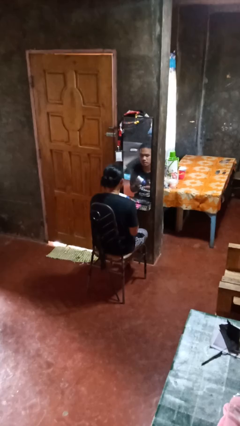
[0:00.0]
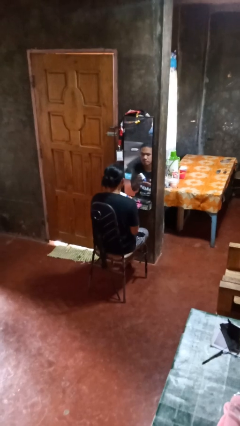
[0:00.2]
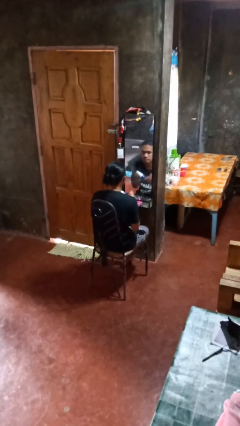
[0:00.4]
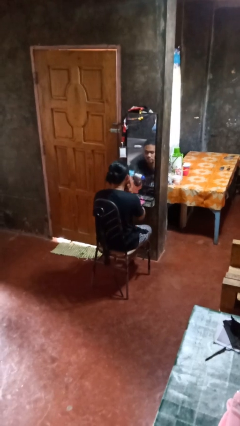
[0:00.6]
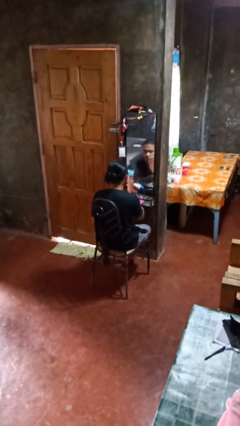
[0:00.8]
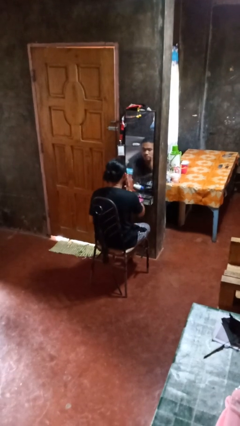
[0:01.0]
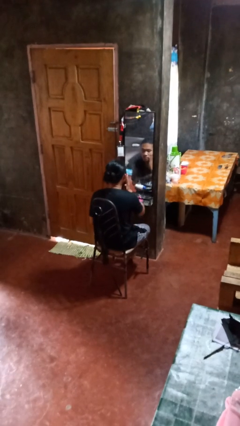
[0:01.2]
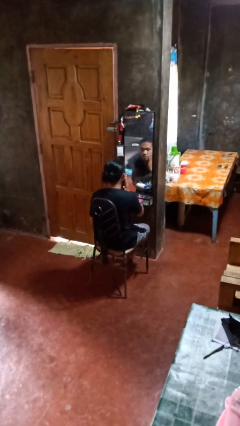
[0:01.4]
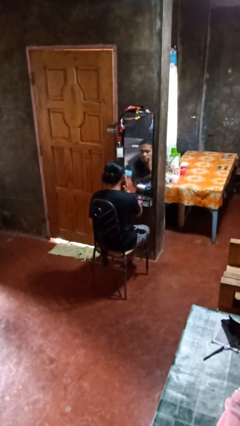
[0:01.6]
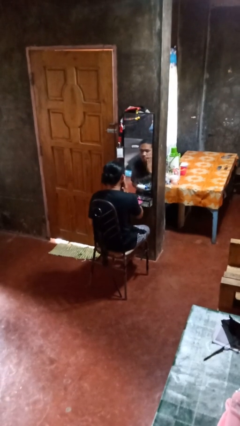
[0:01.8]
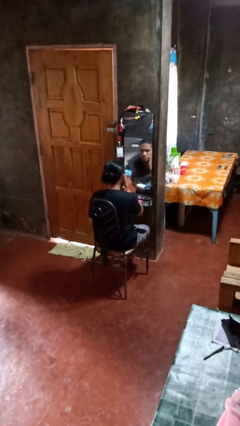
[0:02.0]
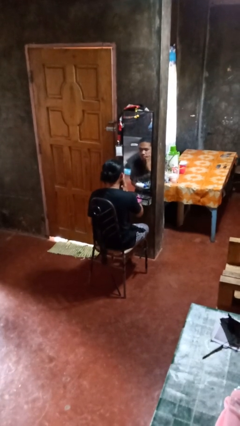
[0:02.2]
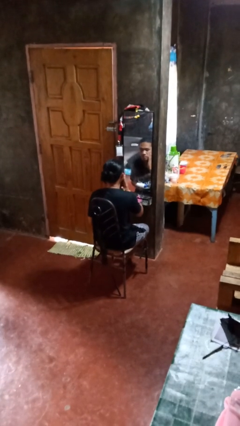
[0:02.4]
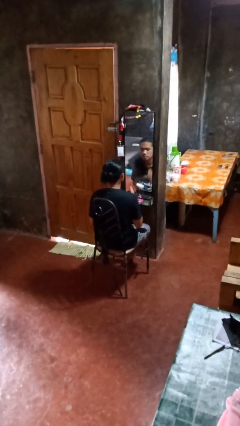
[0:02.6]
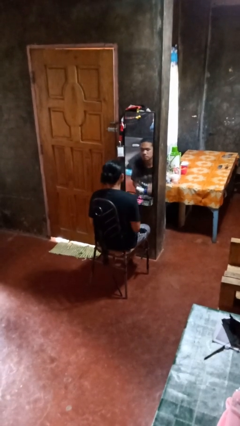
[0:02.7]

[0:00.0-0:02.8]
person applies foundation makeup

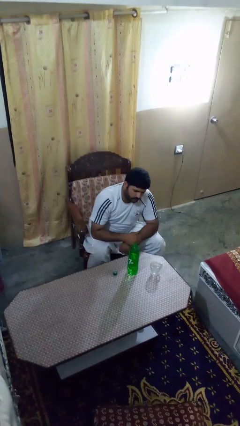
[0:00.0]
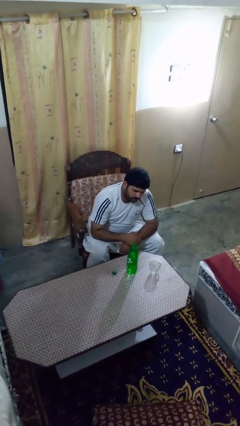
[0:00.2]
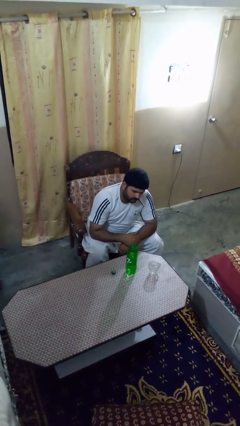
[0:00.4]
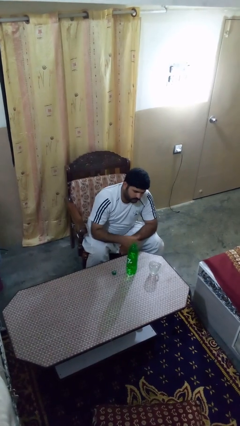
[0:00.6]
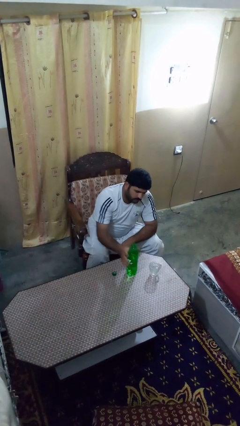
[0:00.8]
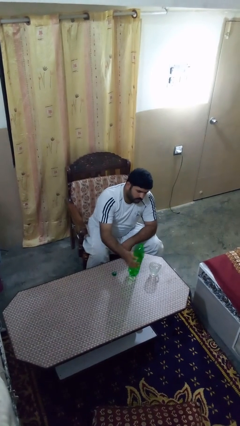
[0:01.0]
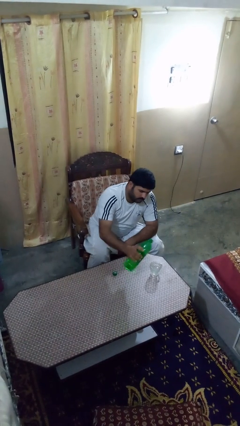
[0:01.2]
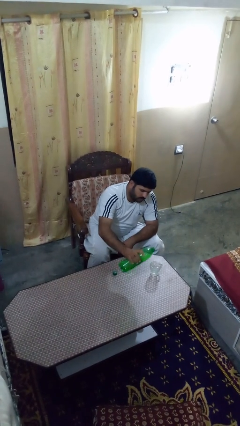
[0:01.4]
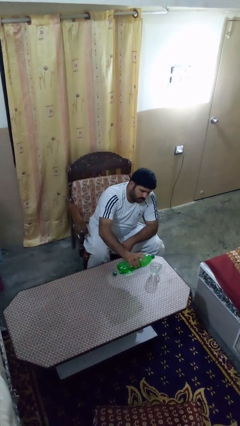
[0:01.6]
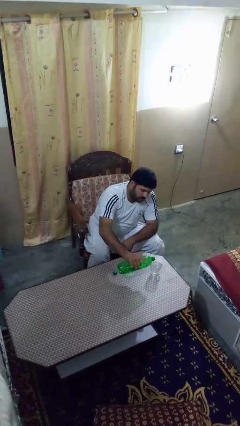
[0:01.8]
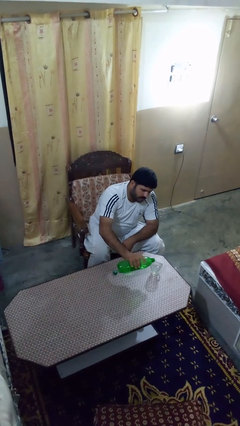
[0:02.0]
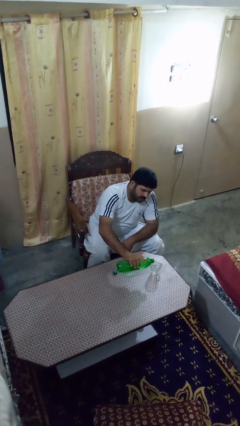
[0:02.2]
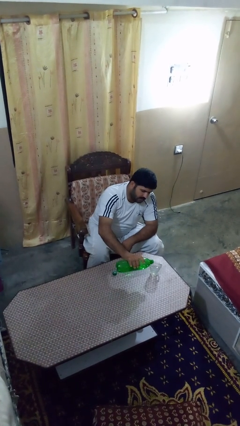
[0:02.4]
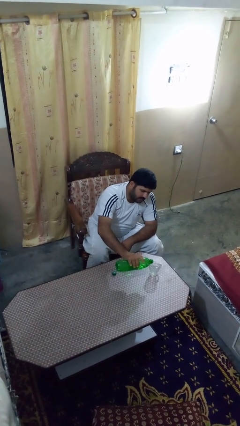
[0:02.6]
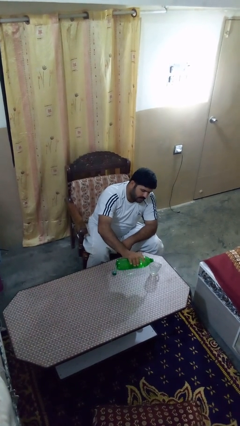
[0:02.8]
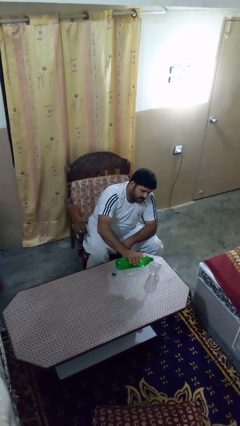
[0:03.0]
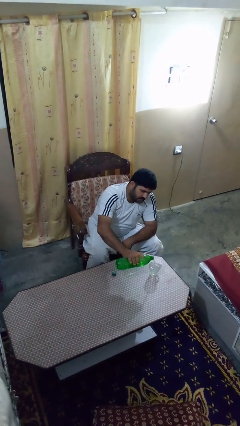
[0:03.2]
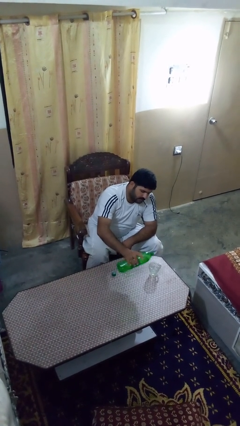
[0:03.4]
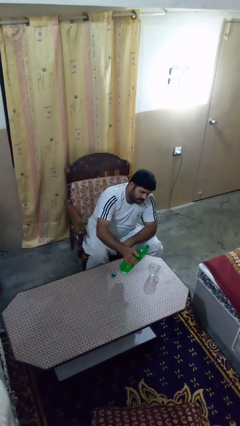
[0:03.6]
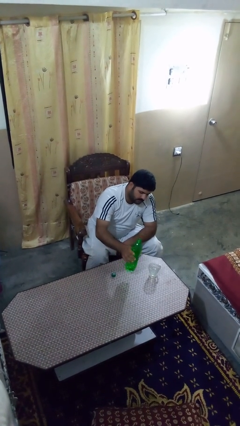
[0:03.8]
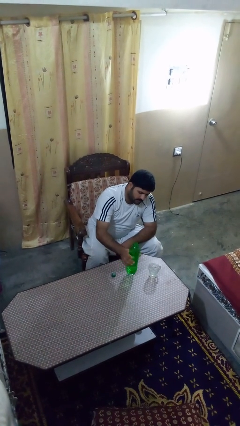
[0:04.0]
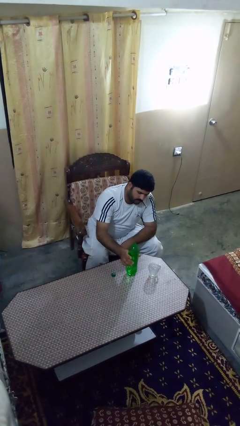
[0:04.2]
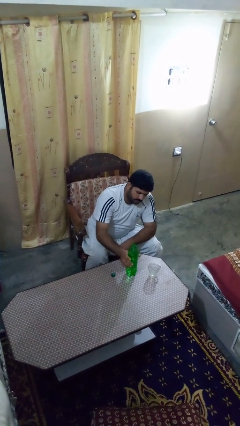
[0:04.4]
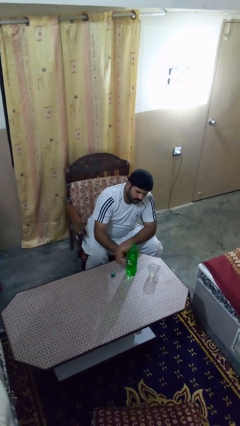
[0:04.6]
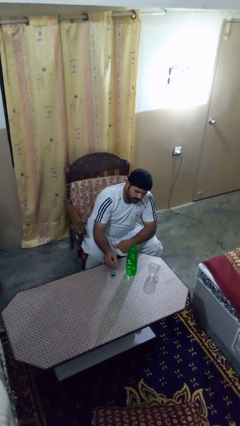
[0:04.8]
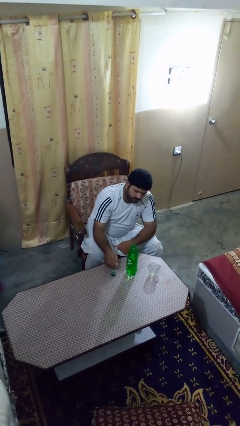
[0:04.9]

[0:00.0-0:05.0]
person pours liquid into cup

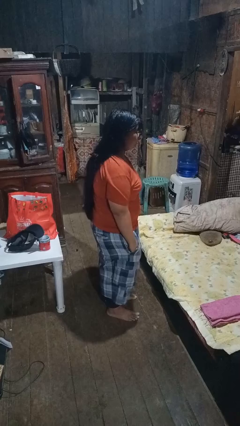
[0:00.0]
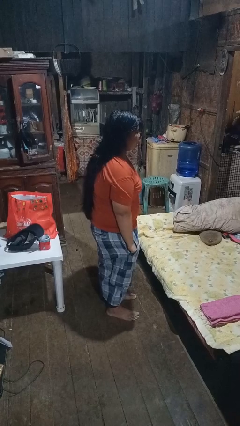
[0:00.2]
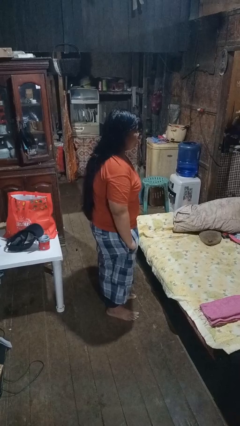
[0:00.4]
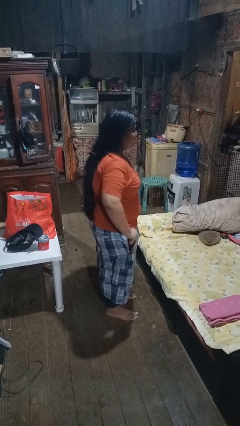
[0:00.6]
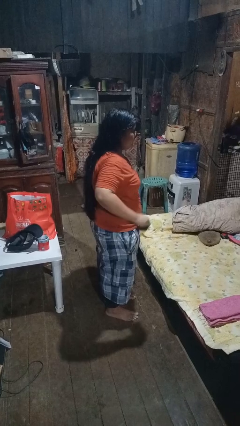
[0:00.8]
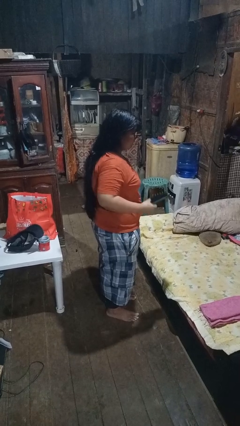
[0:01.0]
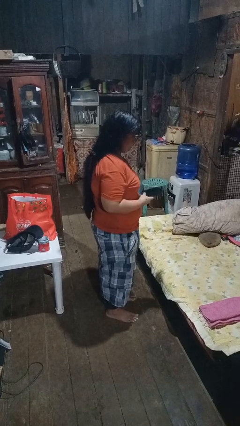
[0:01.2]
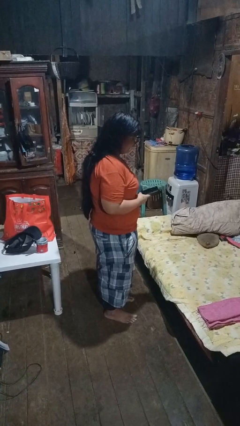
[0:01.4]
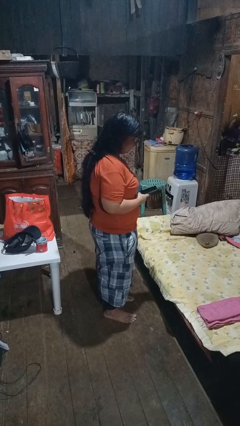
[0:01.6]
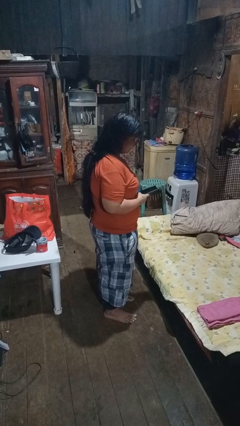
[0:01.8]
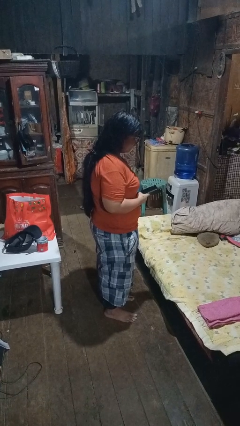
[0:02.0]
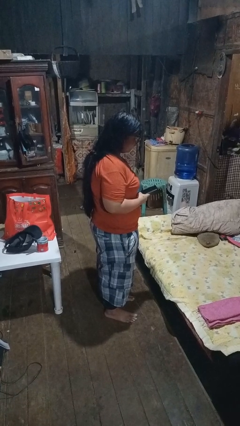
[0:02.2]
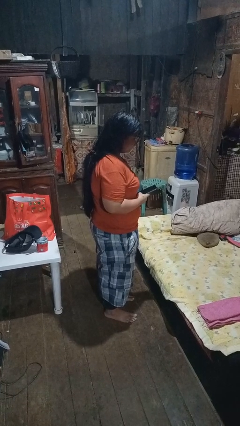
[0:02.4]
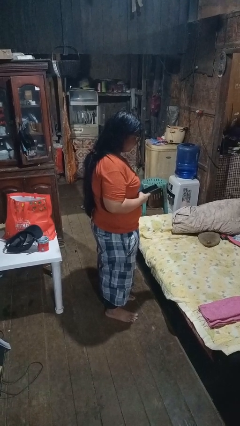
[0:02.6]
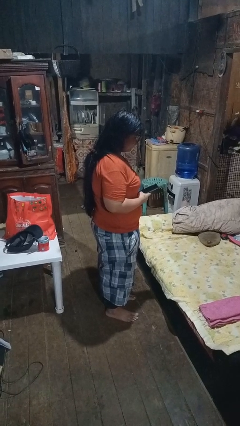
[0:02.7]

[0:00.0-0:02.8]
person takes phone from pocket

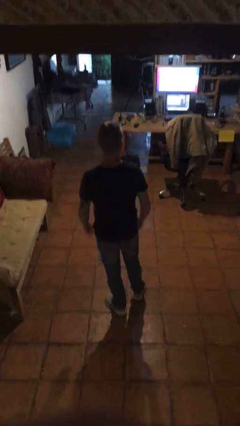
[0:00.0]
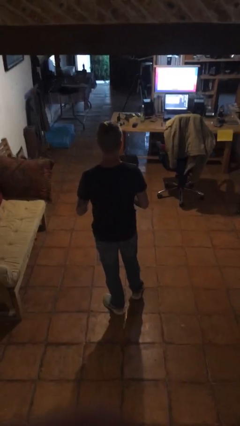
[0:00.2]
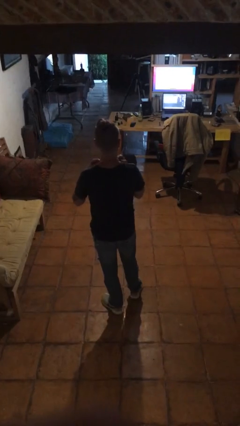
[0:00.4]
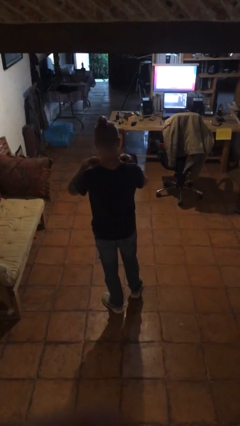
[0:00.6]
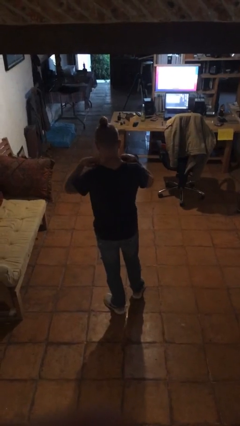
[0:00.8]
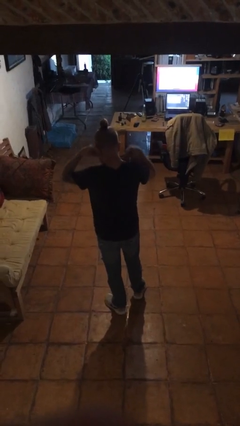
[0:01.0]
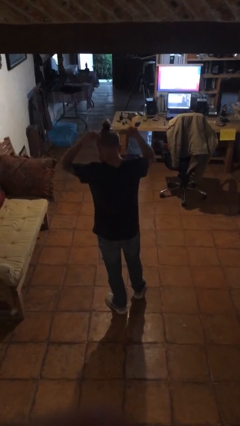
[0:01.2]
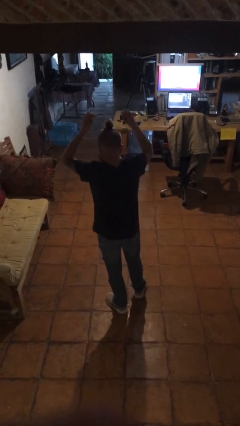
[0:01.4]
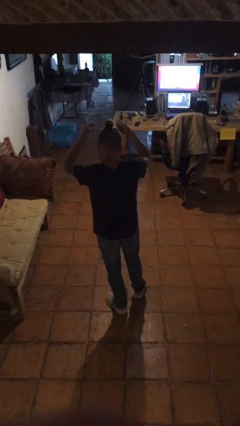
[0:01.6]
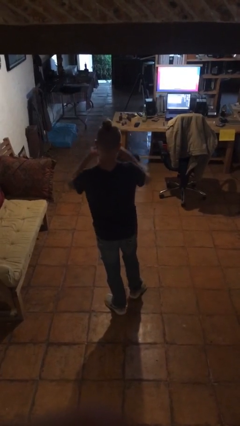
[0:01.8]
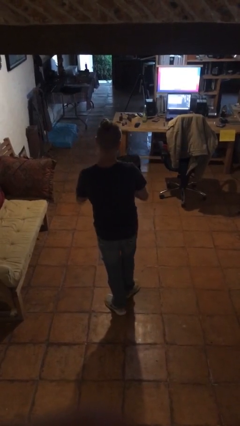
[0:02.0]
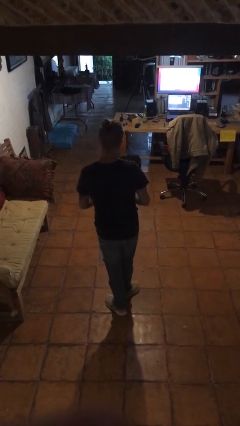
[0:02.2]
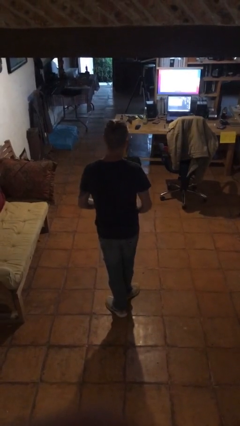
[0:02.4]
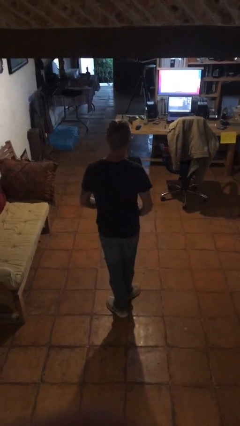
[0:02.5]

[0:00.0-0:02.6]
person takes off necklace

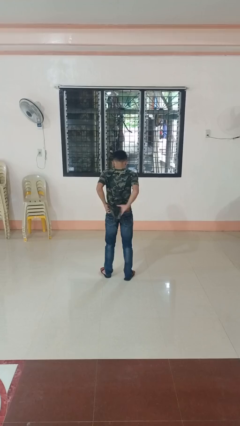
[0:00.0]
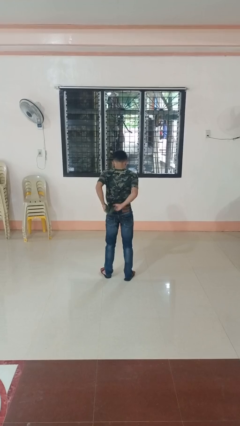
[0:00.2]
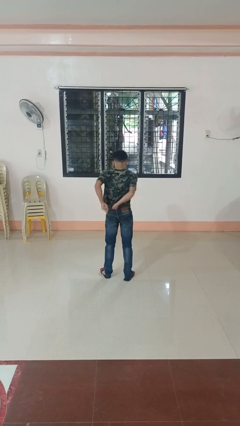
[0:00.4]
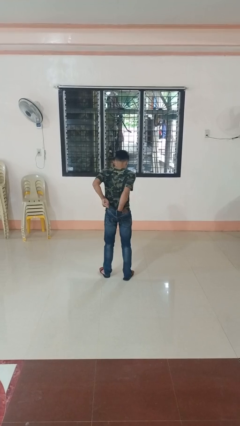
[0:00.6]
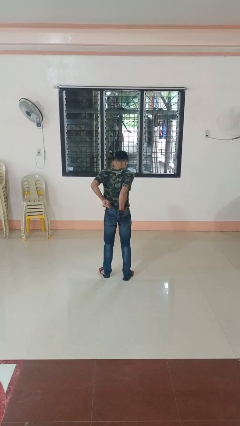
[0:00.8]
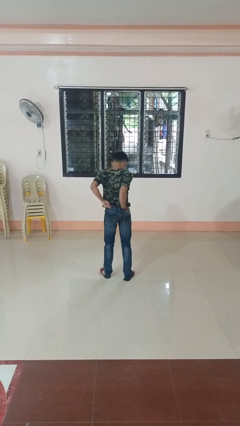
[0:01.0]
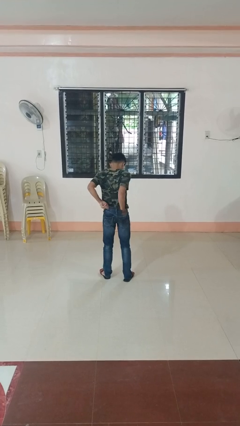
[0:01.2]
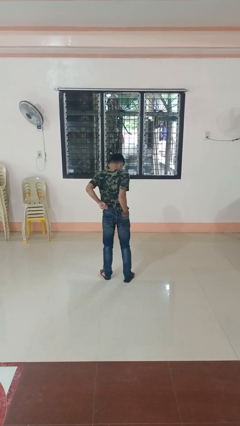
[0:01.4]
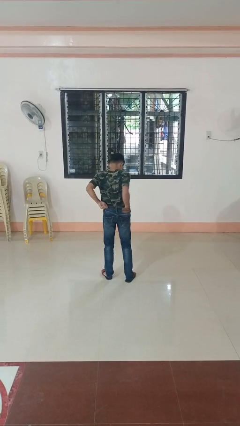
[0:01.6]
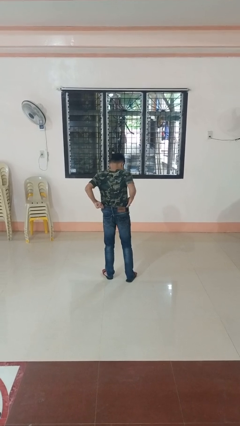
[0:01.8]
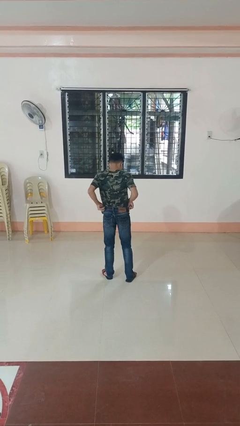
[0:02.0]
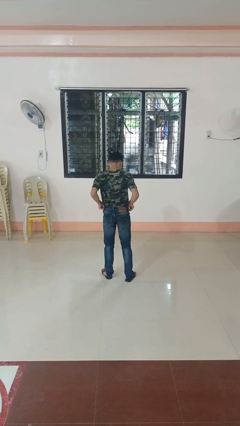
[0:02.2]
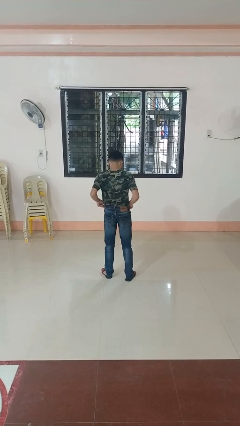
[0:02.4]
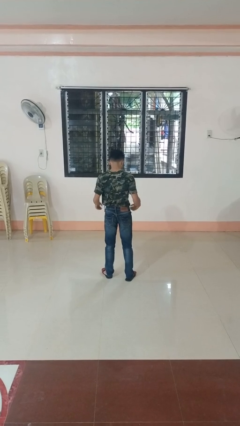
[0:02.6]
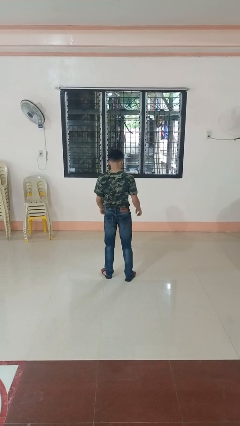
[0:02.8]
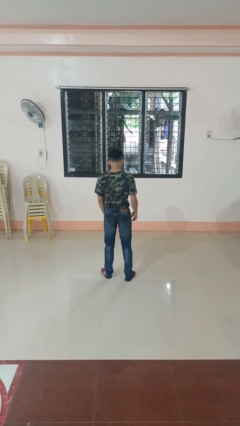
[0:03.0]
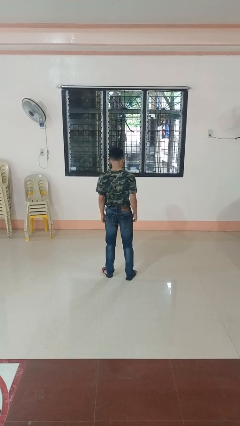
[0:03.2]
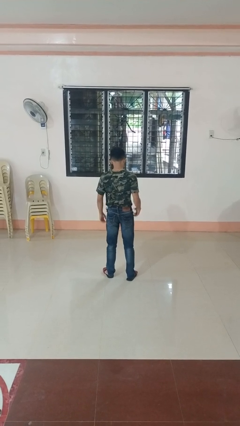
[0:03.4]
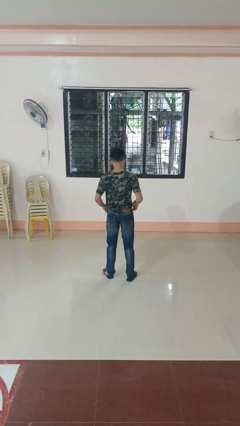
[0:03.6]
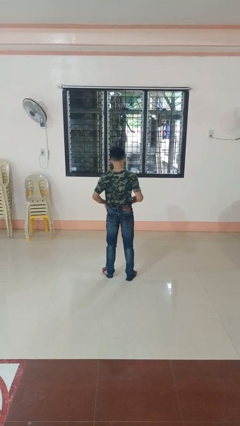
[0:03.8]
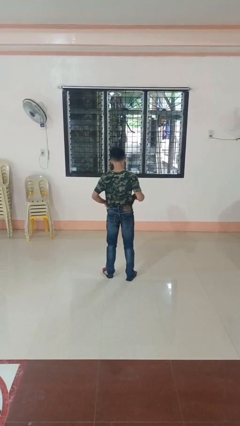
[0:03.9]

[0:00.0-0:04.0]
person tucks in shirt

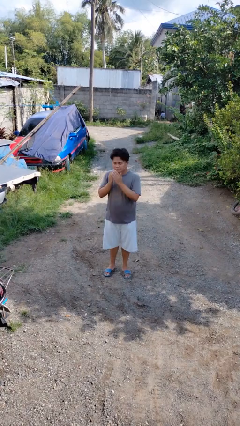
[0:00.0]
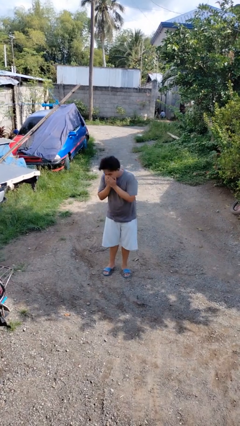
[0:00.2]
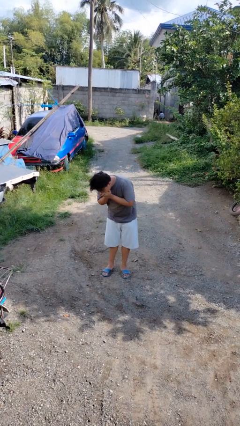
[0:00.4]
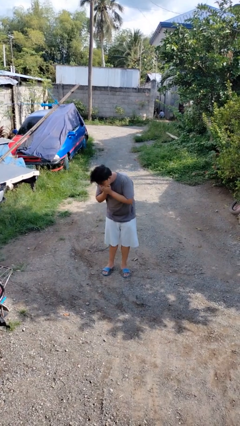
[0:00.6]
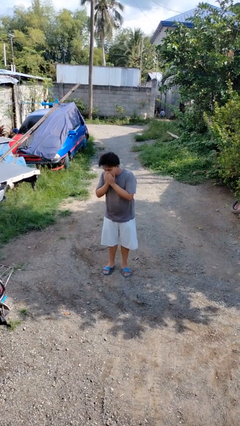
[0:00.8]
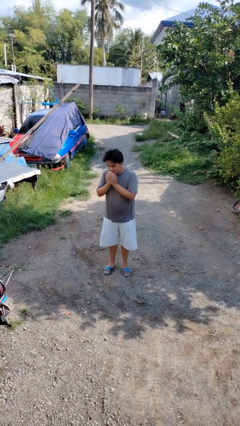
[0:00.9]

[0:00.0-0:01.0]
person sneezes into hand
